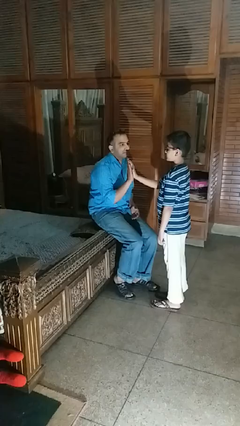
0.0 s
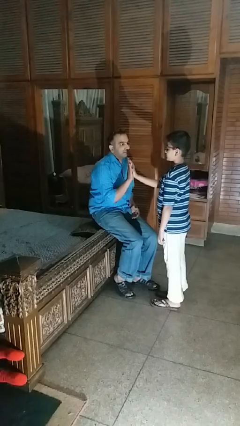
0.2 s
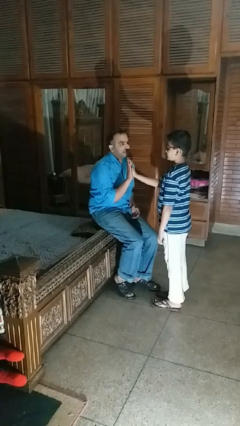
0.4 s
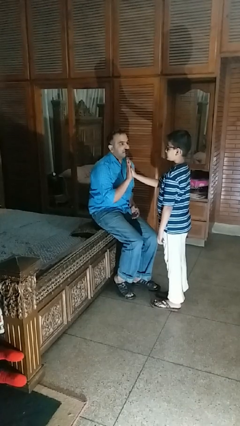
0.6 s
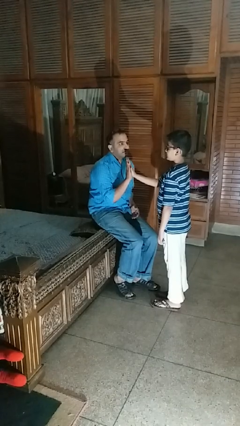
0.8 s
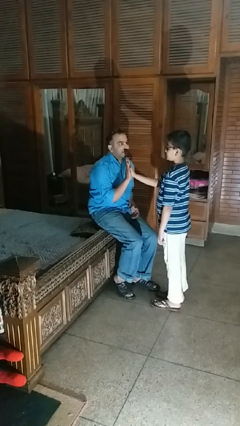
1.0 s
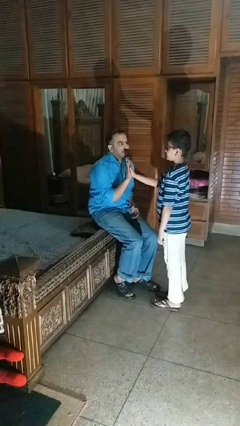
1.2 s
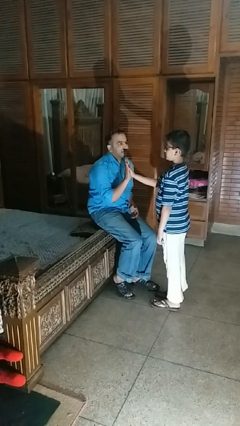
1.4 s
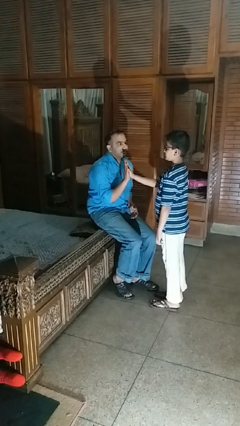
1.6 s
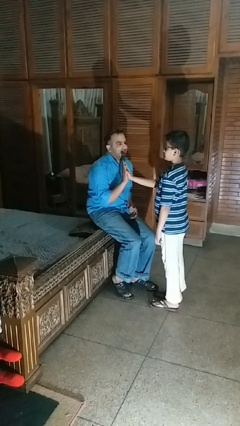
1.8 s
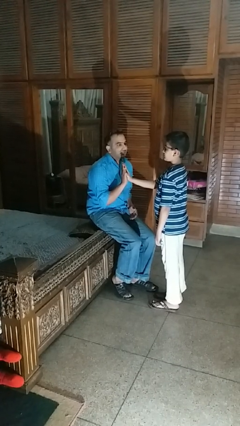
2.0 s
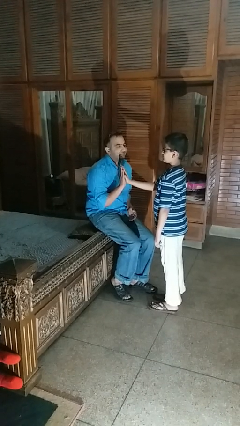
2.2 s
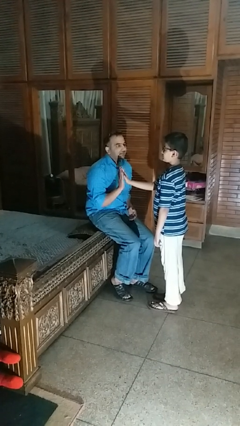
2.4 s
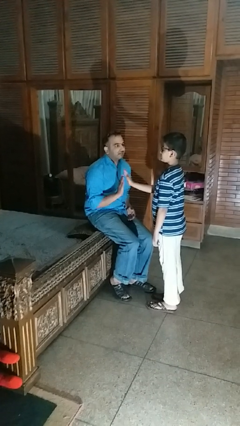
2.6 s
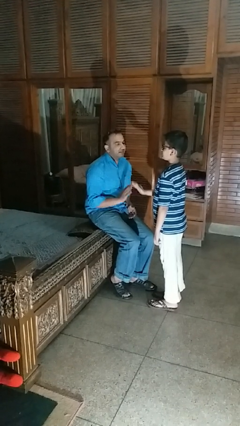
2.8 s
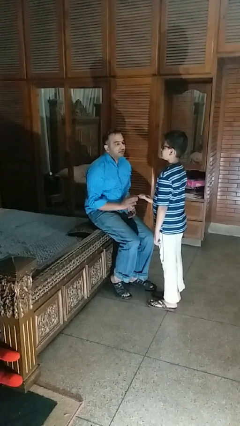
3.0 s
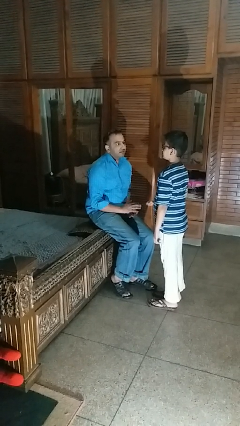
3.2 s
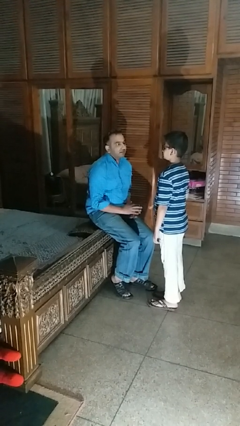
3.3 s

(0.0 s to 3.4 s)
person highfives hand

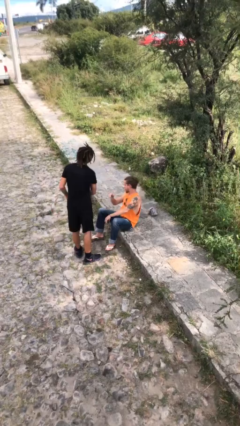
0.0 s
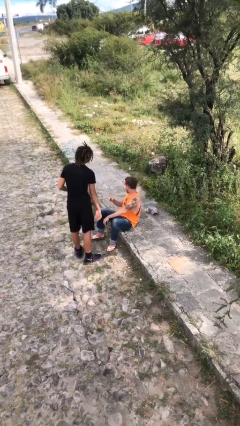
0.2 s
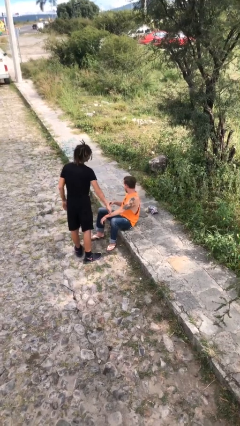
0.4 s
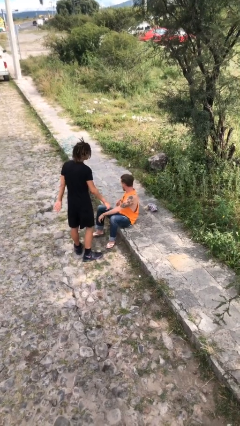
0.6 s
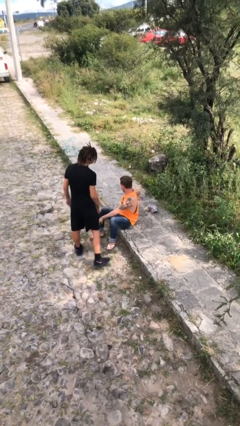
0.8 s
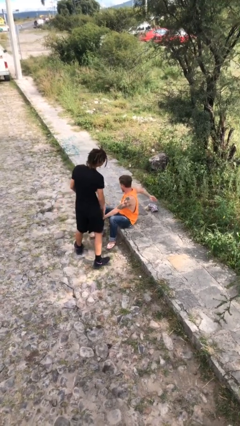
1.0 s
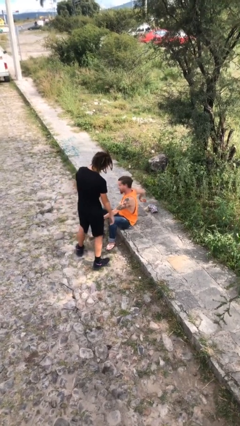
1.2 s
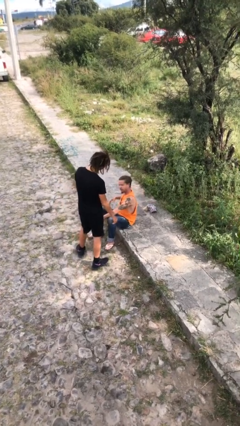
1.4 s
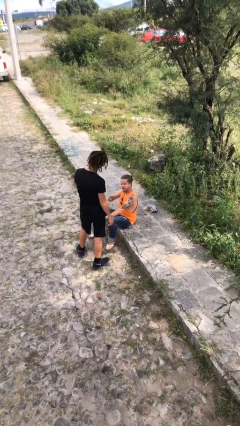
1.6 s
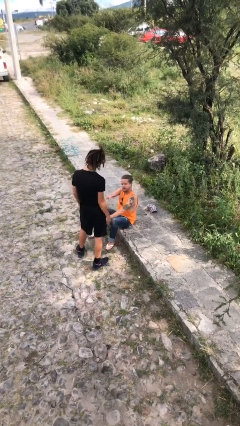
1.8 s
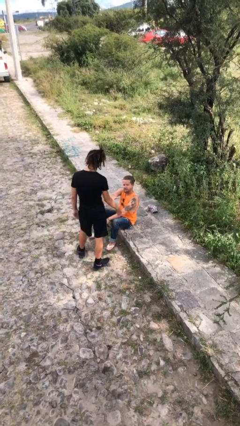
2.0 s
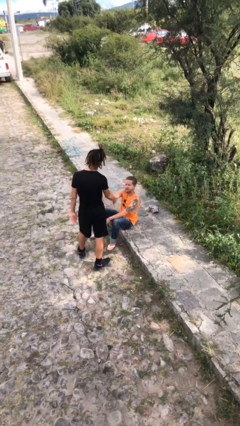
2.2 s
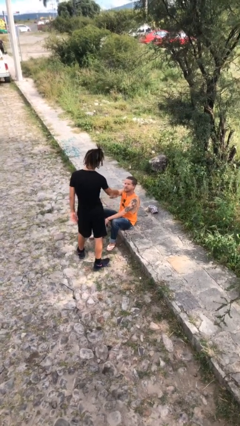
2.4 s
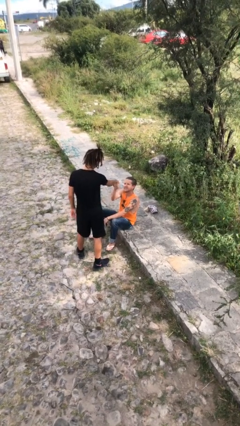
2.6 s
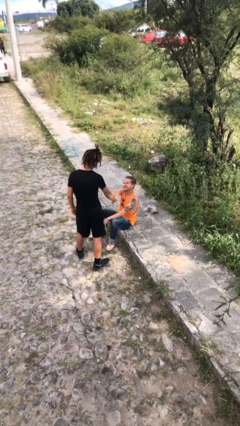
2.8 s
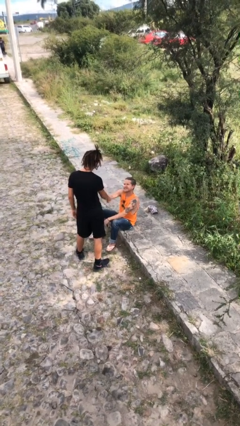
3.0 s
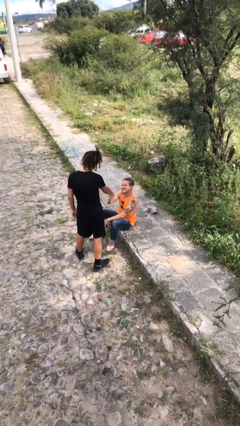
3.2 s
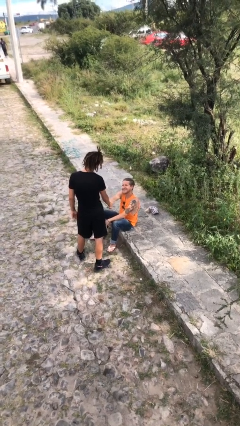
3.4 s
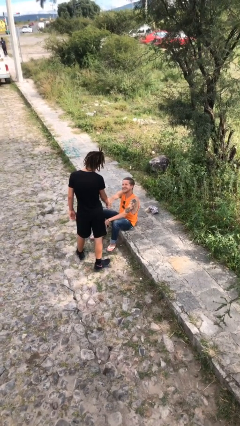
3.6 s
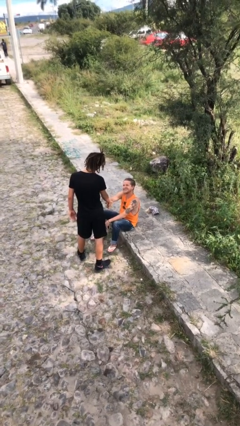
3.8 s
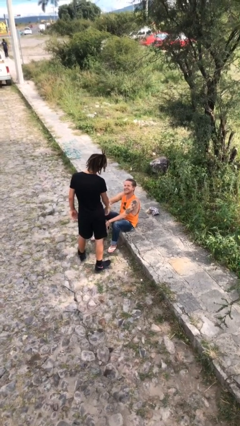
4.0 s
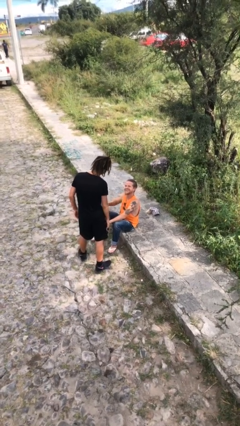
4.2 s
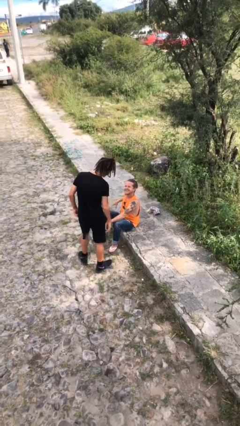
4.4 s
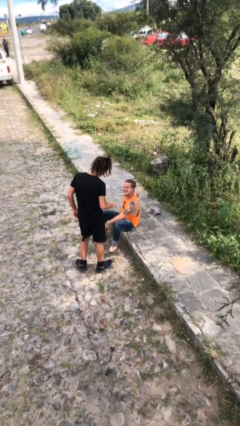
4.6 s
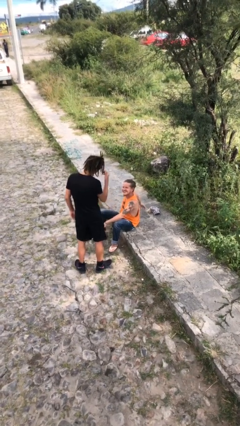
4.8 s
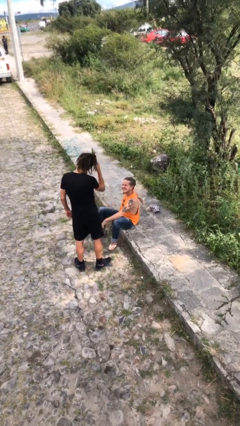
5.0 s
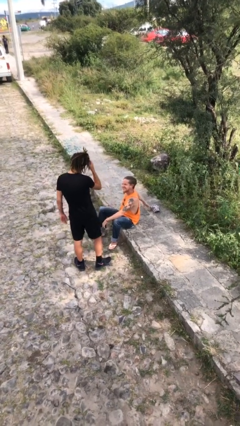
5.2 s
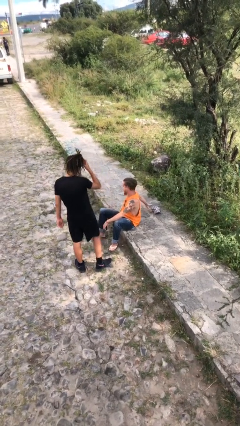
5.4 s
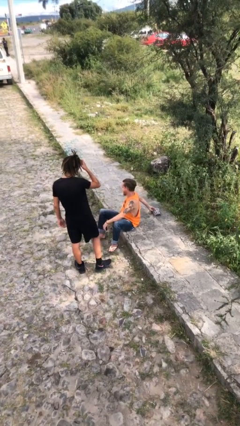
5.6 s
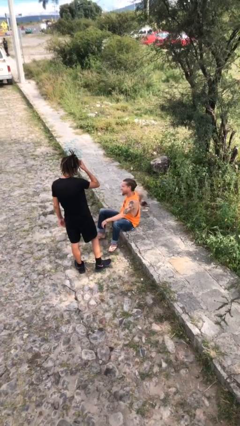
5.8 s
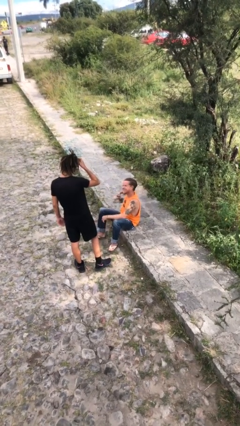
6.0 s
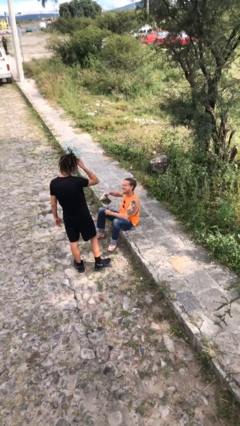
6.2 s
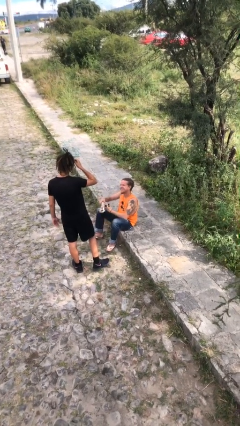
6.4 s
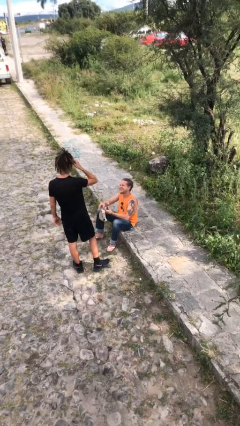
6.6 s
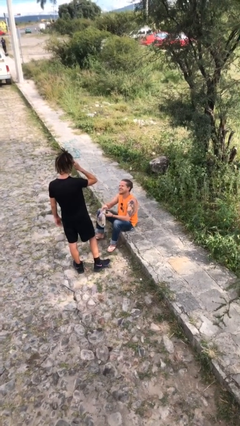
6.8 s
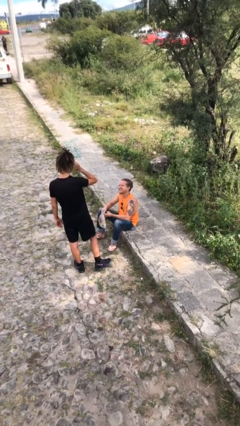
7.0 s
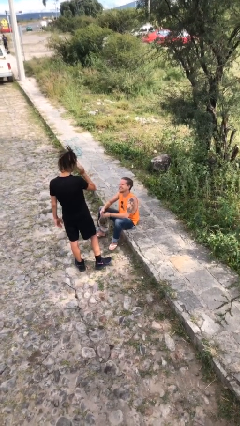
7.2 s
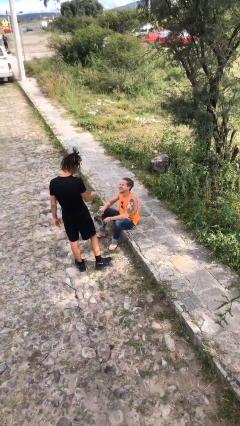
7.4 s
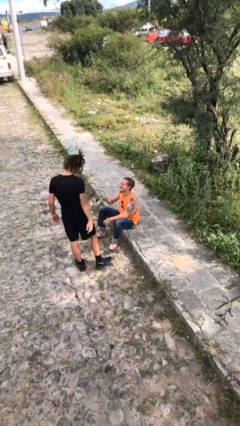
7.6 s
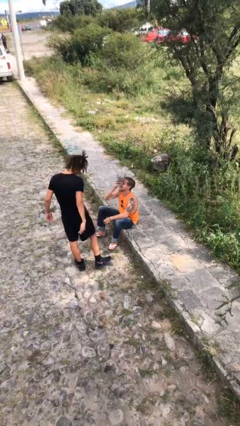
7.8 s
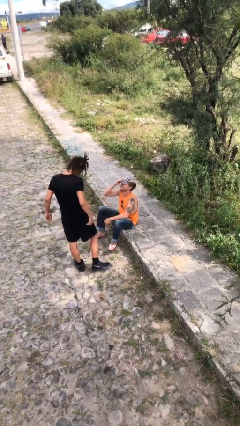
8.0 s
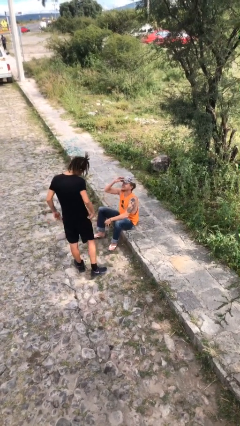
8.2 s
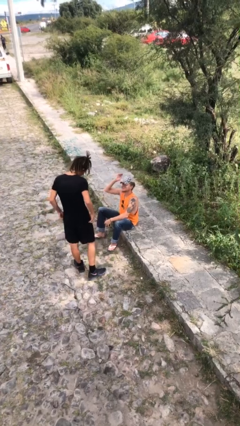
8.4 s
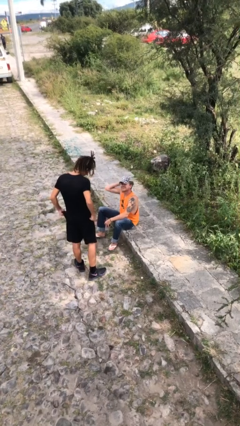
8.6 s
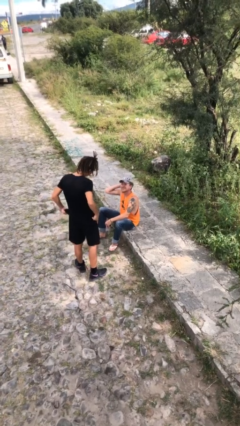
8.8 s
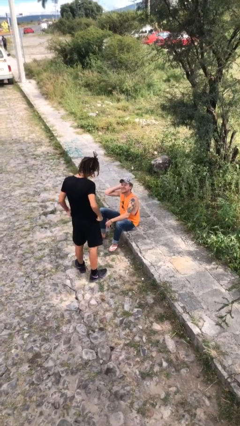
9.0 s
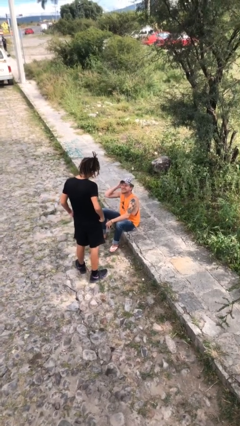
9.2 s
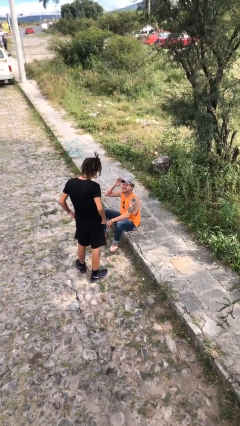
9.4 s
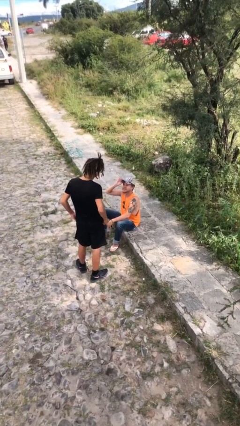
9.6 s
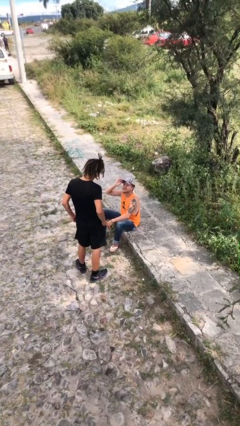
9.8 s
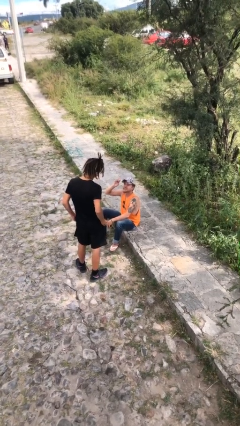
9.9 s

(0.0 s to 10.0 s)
person shakes hand

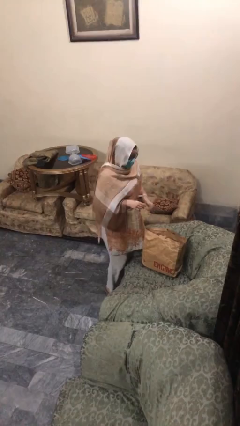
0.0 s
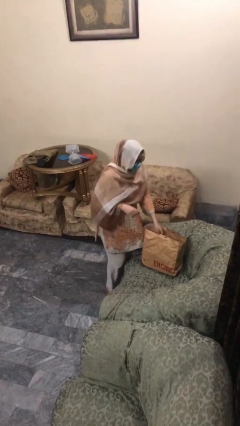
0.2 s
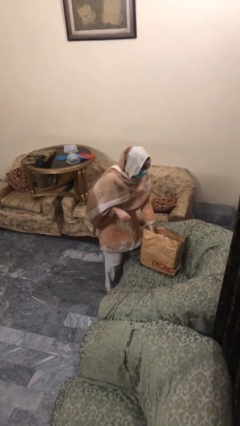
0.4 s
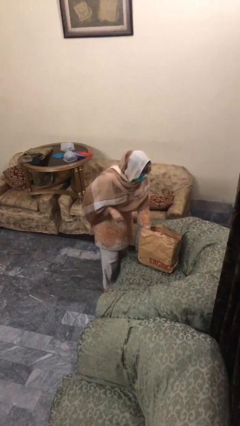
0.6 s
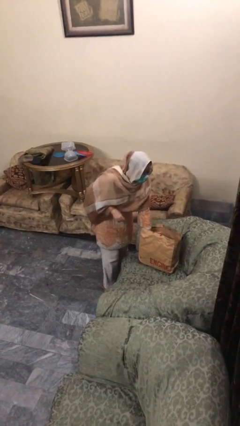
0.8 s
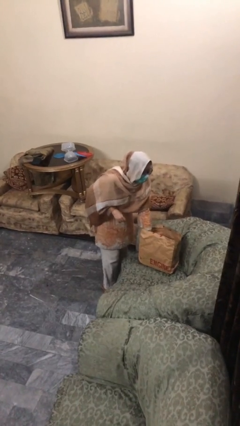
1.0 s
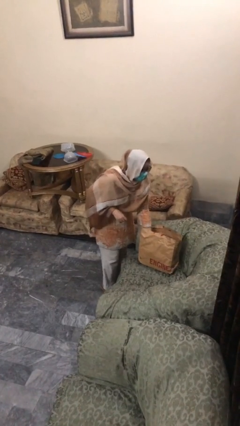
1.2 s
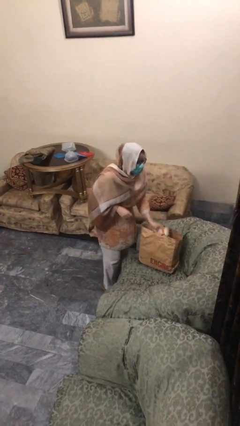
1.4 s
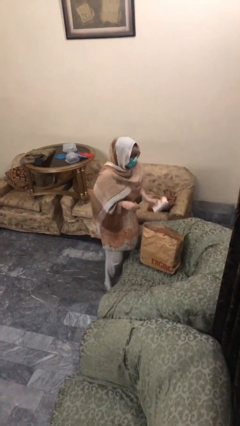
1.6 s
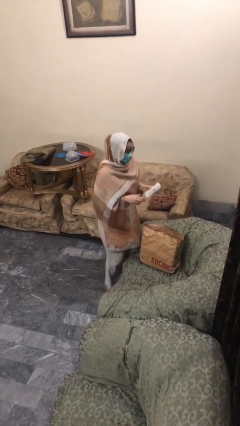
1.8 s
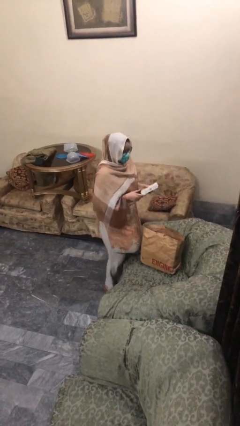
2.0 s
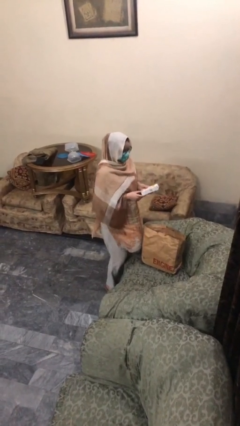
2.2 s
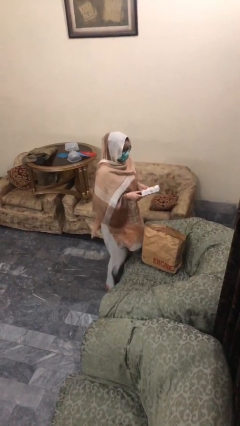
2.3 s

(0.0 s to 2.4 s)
person takes object from bag

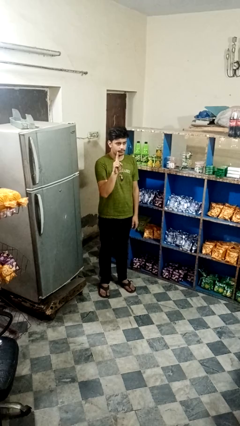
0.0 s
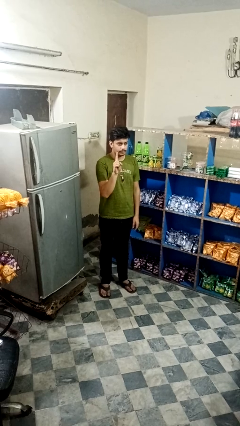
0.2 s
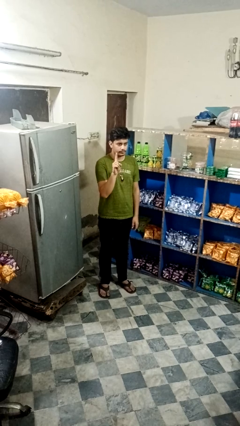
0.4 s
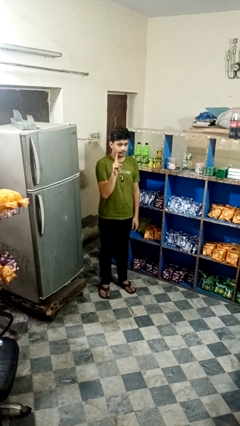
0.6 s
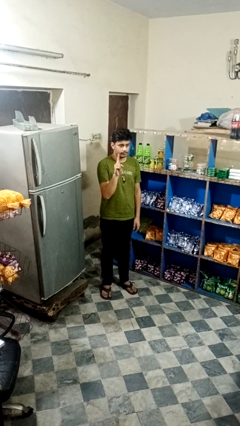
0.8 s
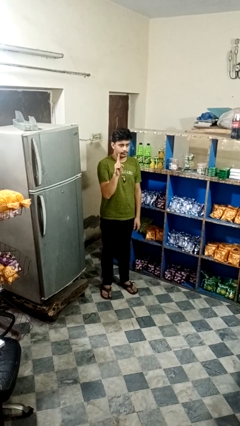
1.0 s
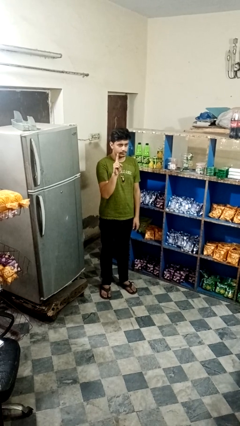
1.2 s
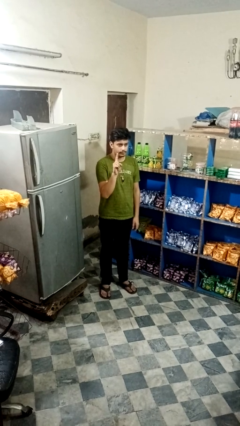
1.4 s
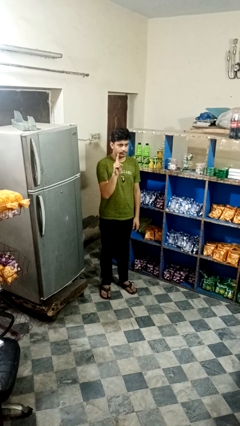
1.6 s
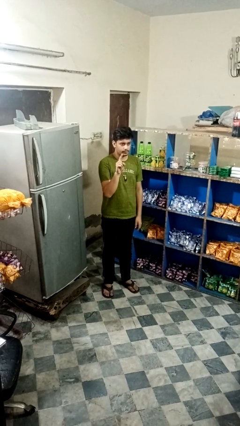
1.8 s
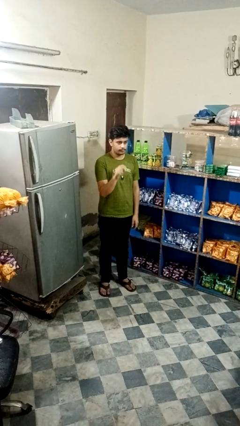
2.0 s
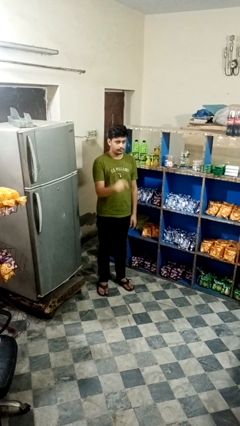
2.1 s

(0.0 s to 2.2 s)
person gestures number one

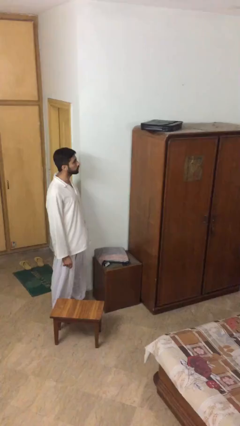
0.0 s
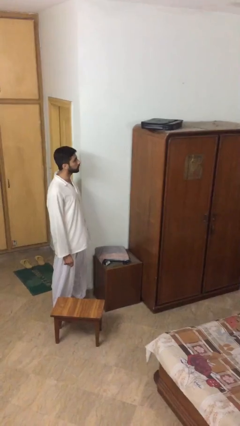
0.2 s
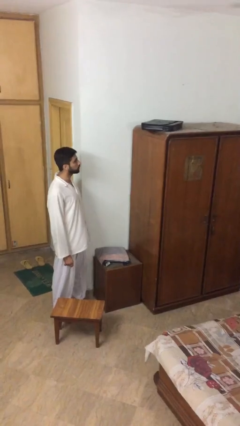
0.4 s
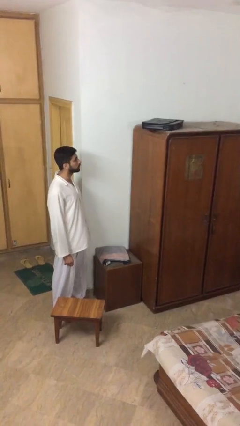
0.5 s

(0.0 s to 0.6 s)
person picks up object from shelf
